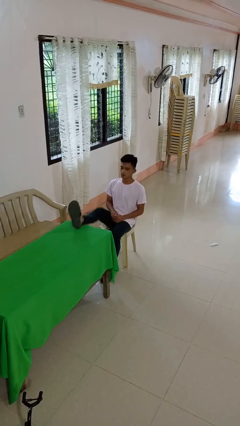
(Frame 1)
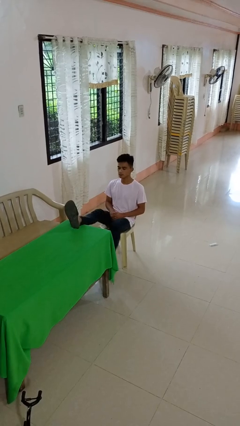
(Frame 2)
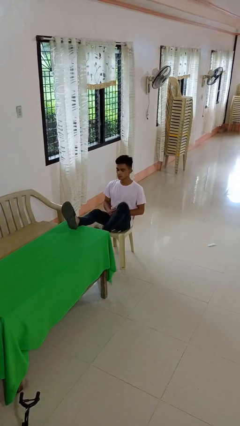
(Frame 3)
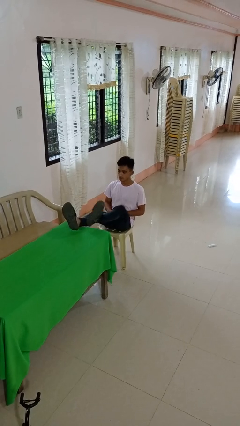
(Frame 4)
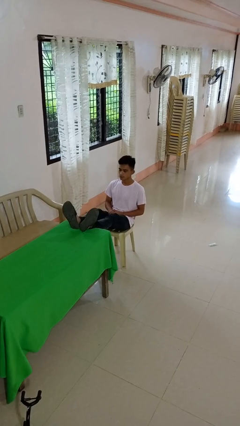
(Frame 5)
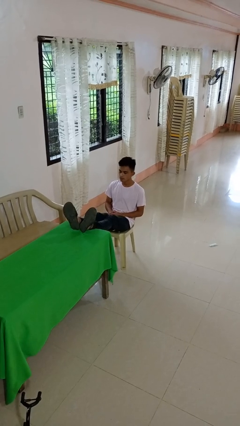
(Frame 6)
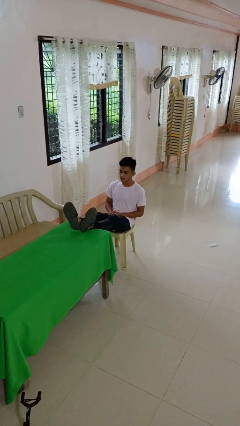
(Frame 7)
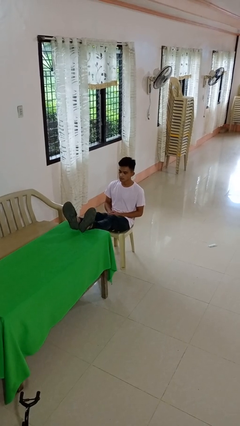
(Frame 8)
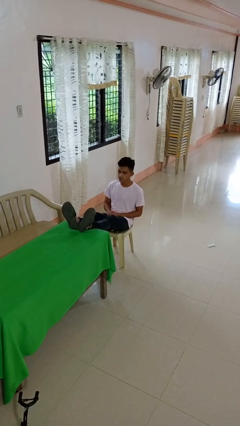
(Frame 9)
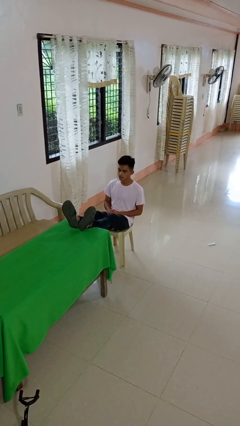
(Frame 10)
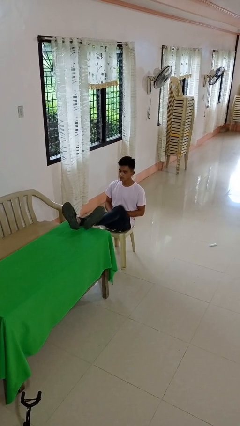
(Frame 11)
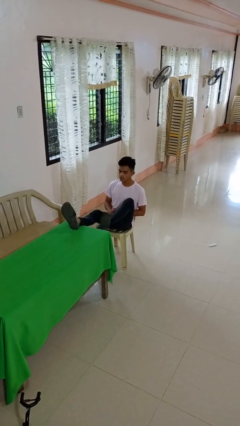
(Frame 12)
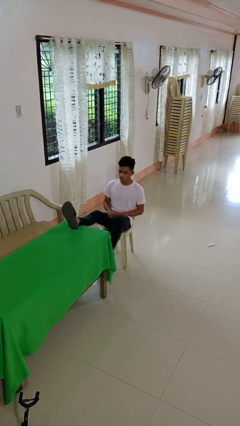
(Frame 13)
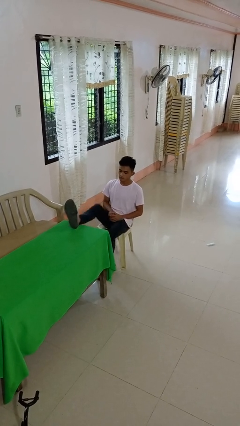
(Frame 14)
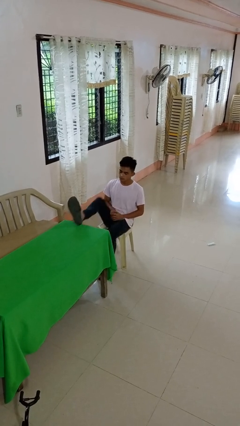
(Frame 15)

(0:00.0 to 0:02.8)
person puts feet up

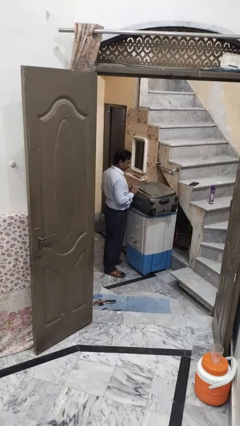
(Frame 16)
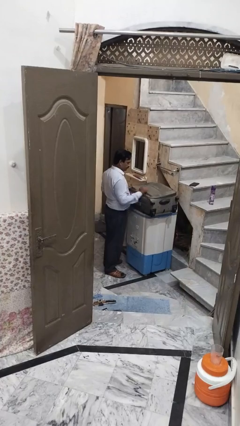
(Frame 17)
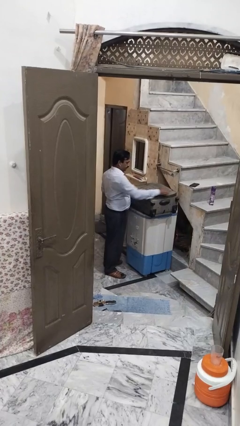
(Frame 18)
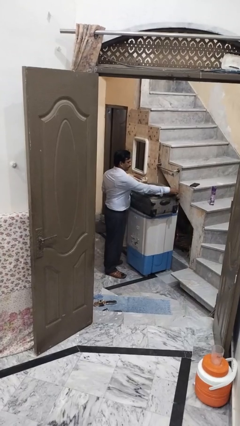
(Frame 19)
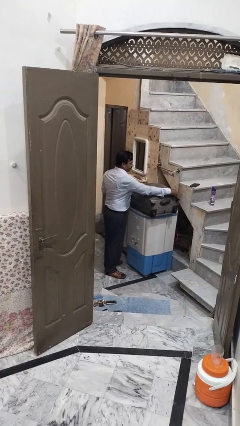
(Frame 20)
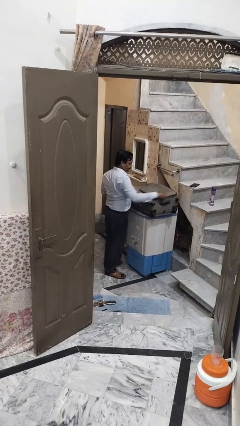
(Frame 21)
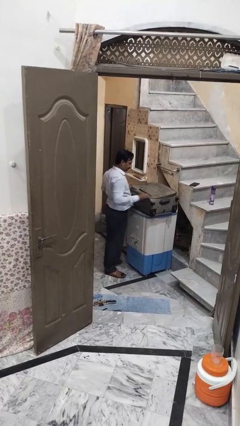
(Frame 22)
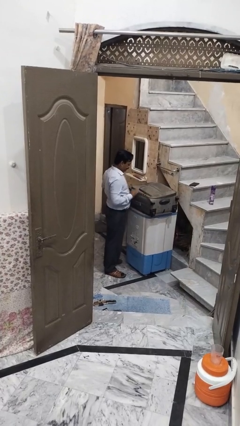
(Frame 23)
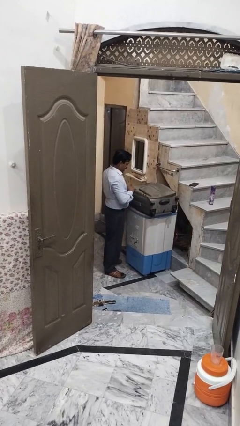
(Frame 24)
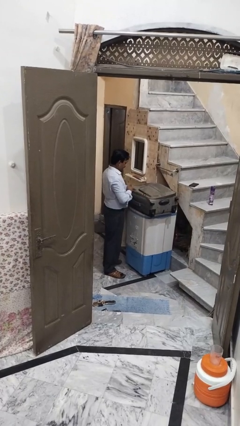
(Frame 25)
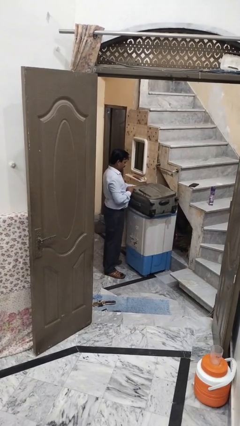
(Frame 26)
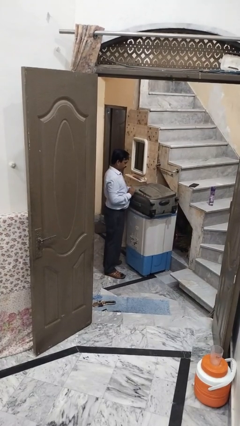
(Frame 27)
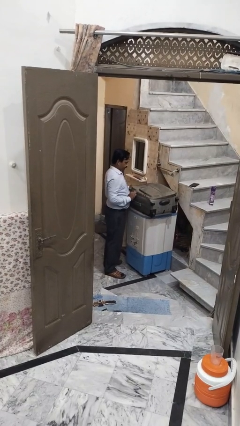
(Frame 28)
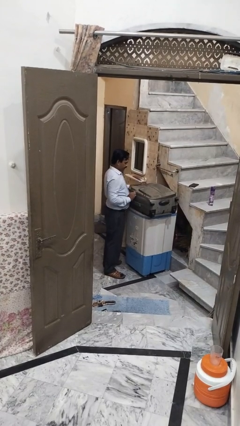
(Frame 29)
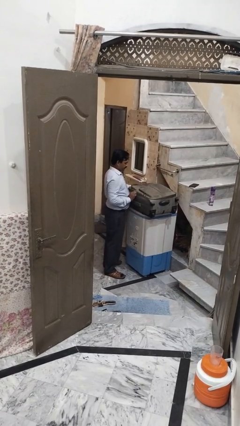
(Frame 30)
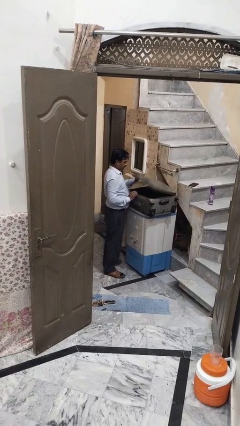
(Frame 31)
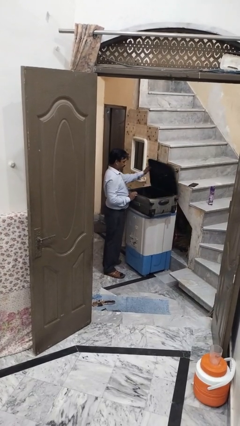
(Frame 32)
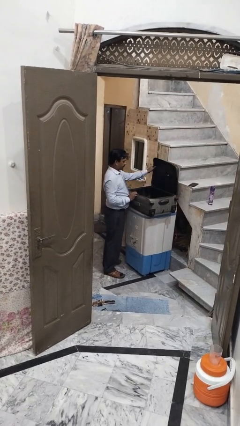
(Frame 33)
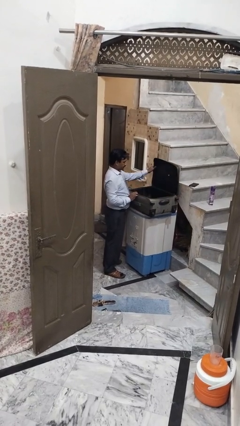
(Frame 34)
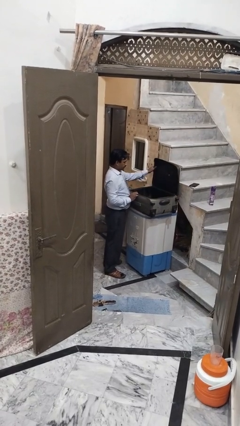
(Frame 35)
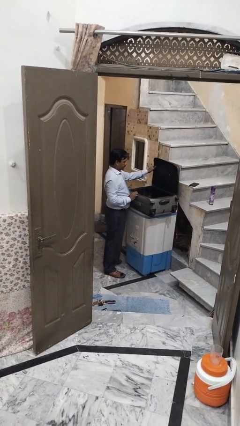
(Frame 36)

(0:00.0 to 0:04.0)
person opens suitcase

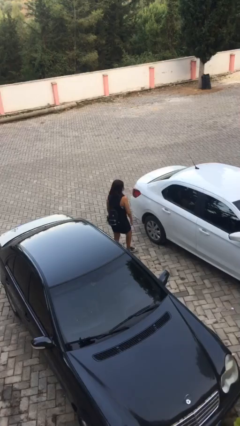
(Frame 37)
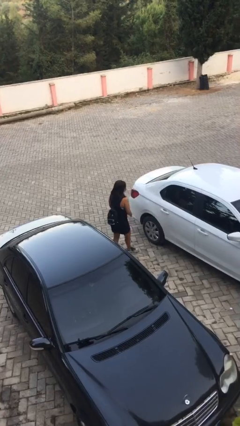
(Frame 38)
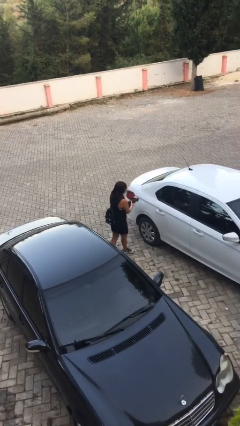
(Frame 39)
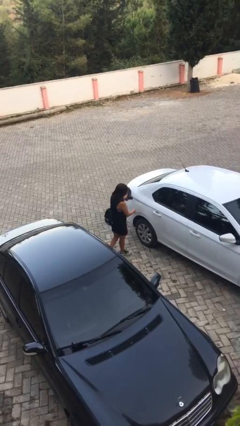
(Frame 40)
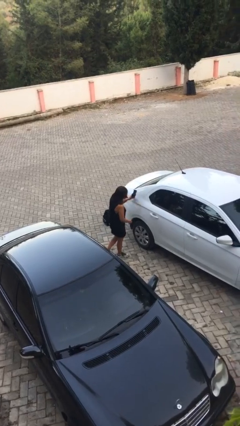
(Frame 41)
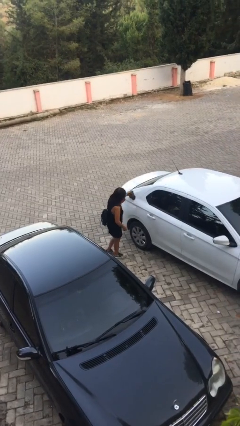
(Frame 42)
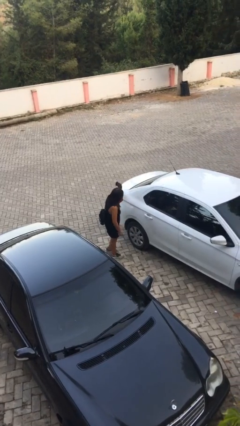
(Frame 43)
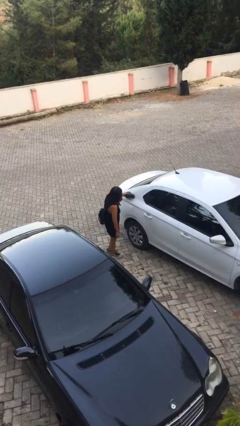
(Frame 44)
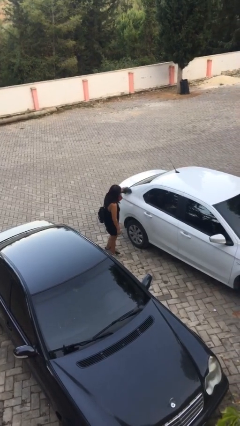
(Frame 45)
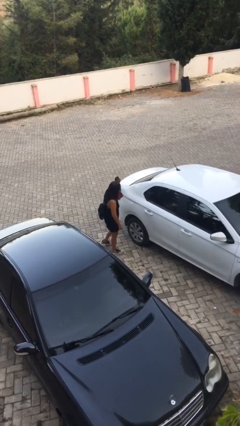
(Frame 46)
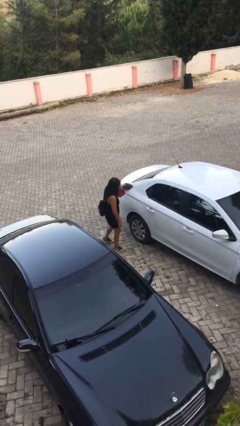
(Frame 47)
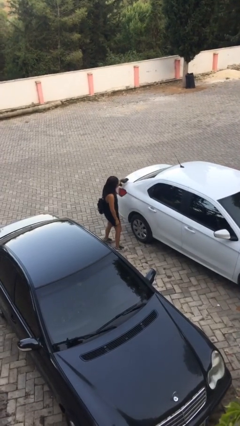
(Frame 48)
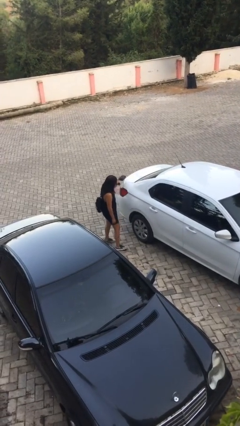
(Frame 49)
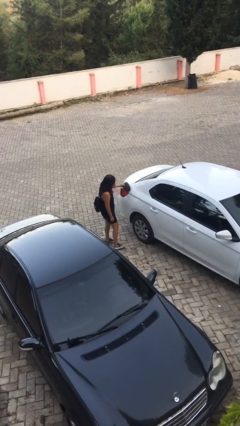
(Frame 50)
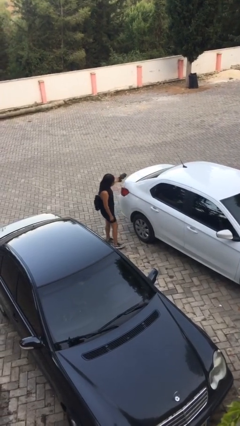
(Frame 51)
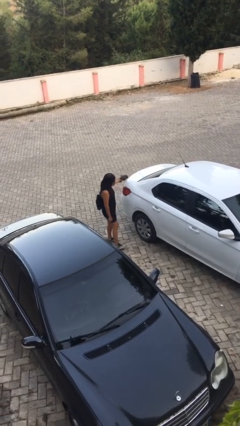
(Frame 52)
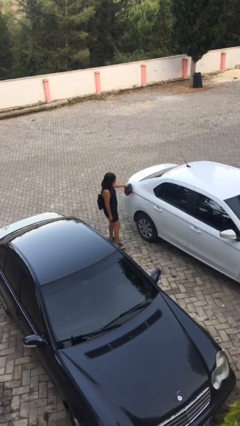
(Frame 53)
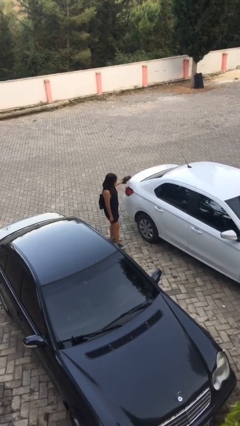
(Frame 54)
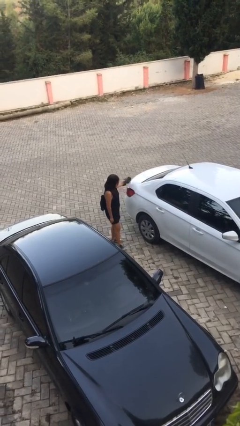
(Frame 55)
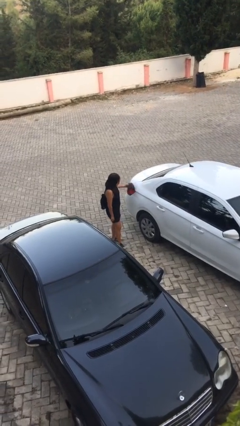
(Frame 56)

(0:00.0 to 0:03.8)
person polishes car with rag

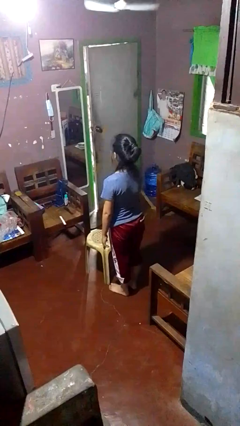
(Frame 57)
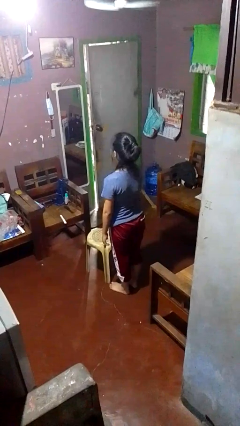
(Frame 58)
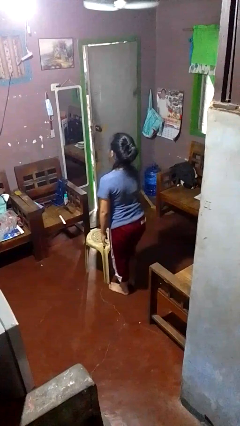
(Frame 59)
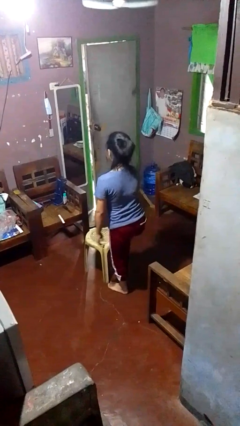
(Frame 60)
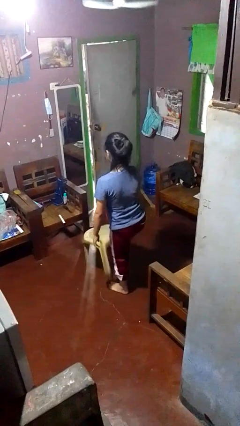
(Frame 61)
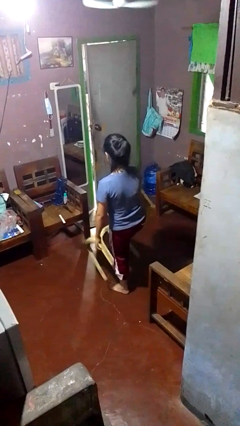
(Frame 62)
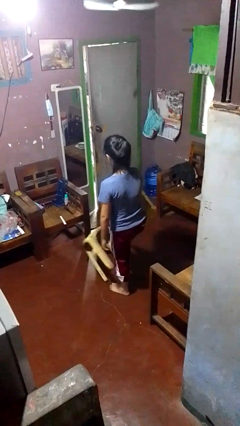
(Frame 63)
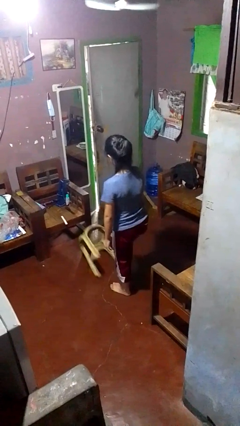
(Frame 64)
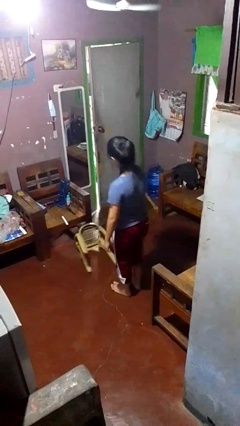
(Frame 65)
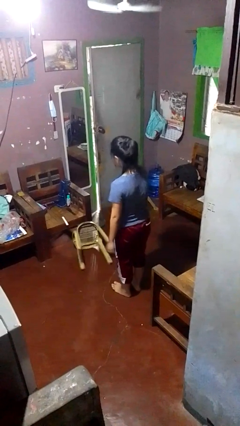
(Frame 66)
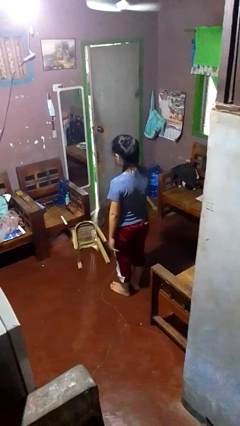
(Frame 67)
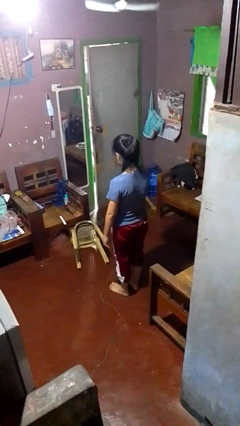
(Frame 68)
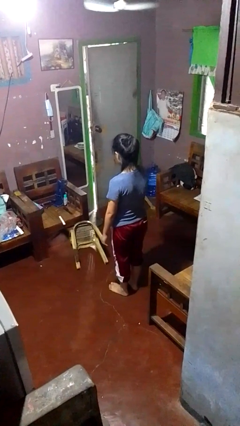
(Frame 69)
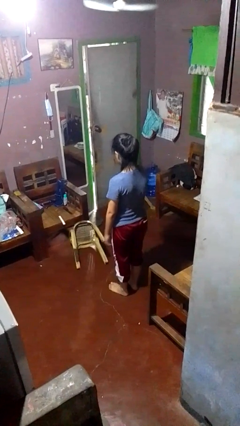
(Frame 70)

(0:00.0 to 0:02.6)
person knocks over furniture

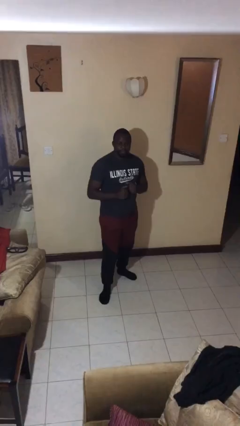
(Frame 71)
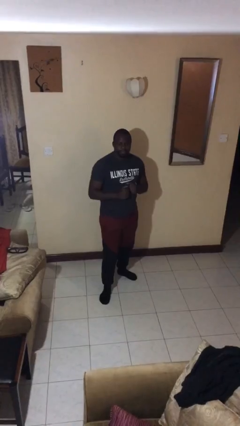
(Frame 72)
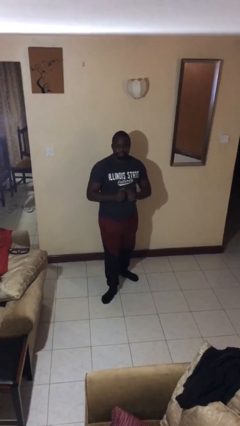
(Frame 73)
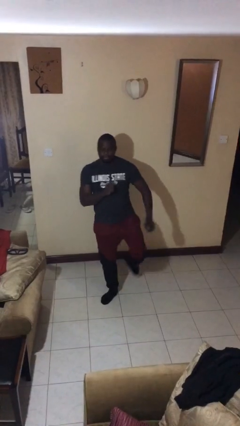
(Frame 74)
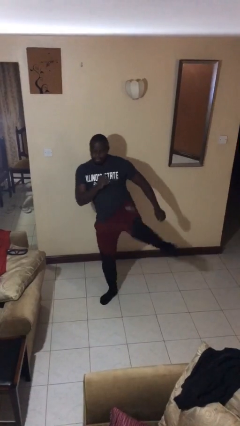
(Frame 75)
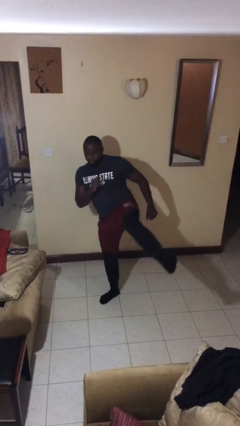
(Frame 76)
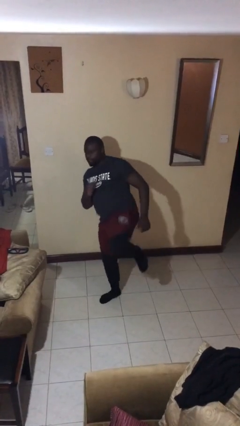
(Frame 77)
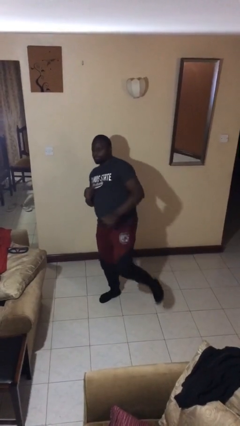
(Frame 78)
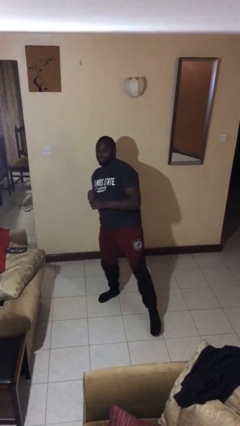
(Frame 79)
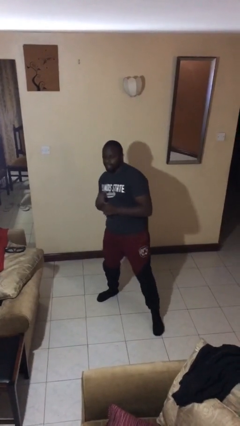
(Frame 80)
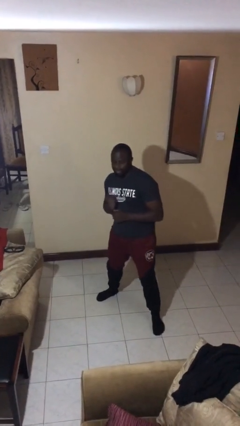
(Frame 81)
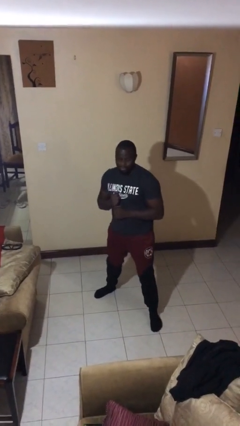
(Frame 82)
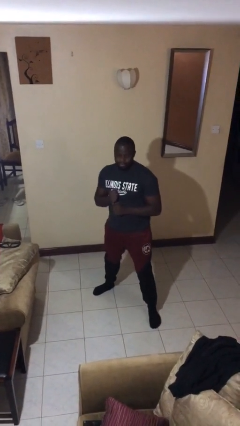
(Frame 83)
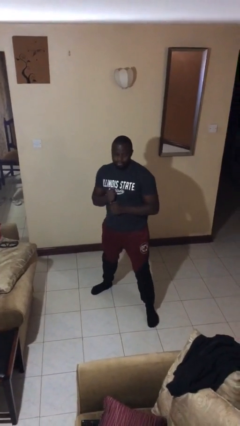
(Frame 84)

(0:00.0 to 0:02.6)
person karate kicks

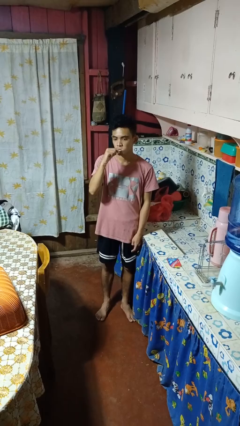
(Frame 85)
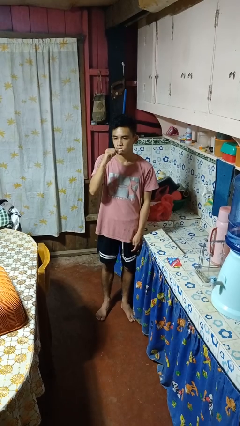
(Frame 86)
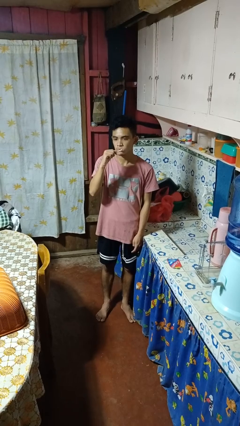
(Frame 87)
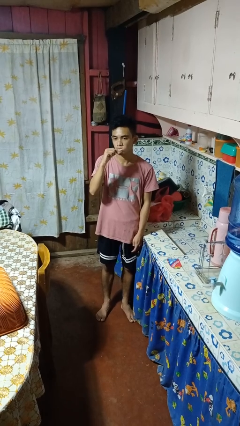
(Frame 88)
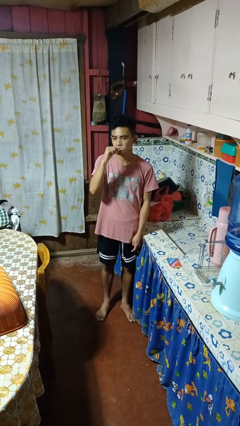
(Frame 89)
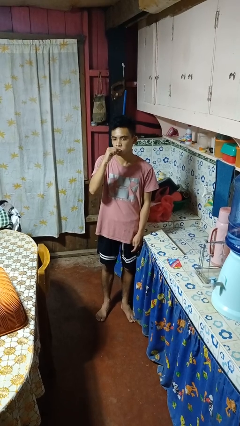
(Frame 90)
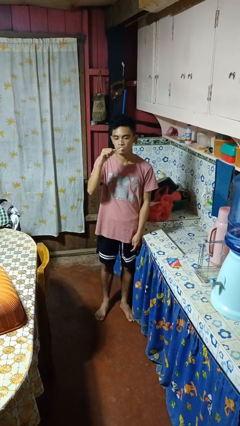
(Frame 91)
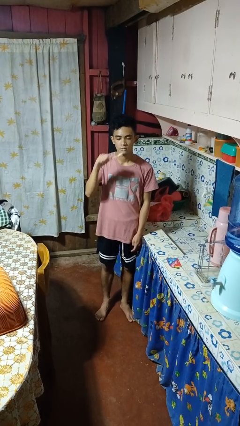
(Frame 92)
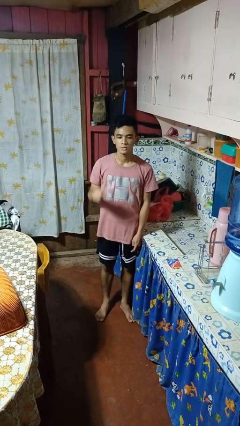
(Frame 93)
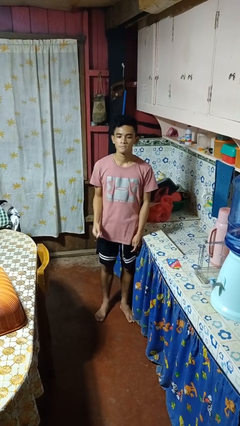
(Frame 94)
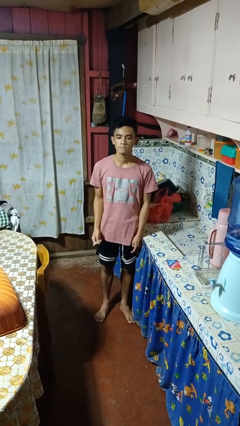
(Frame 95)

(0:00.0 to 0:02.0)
person brushes teeth
